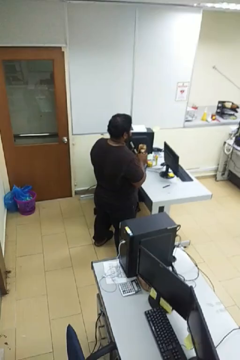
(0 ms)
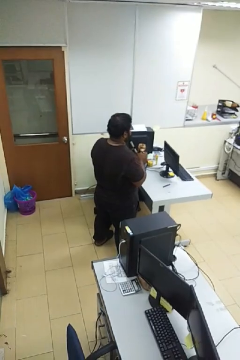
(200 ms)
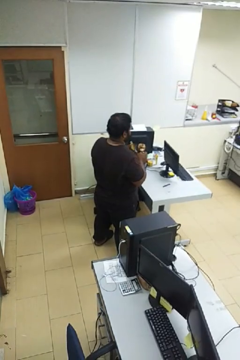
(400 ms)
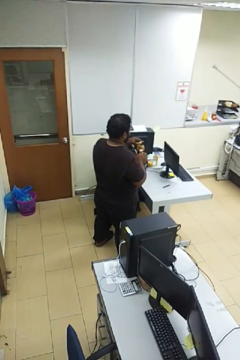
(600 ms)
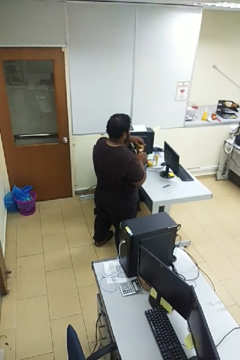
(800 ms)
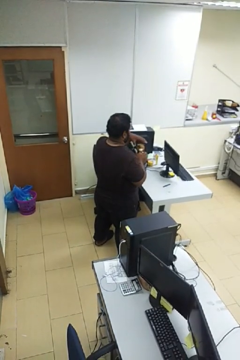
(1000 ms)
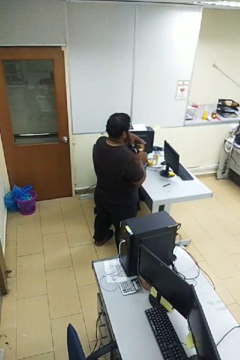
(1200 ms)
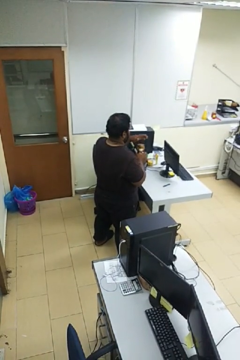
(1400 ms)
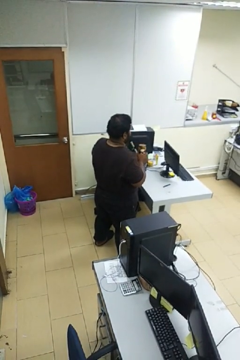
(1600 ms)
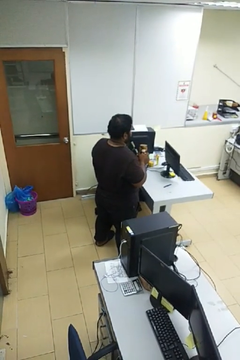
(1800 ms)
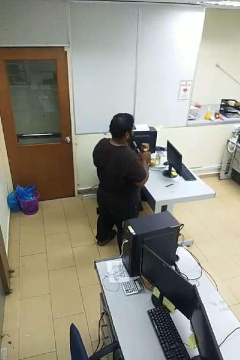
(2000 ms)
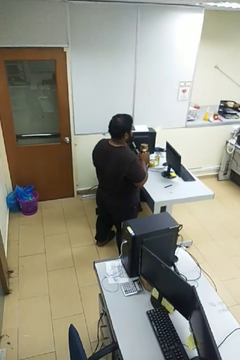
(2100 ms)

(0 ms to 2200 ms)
person closes jar

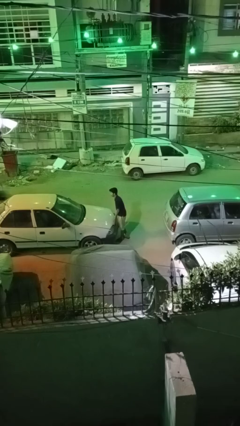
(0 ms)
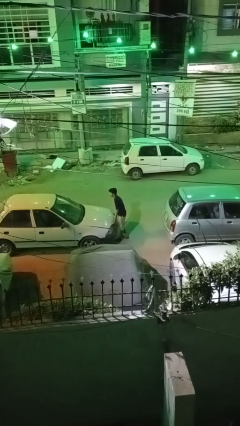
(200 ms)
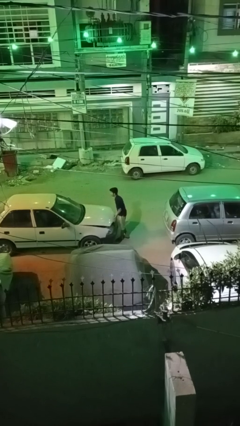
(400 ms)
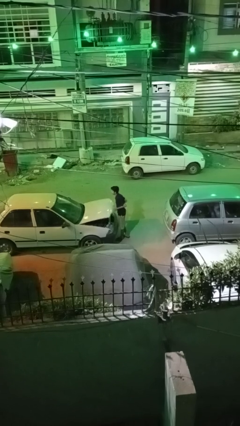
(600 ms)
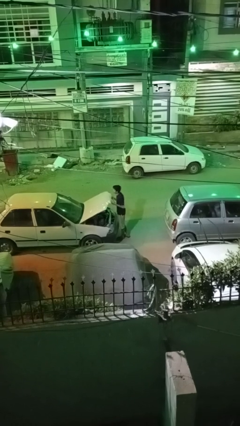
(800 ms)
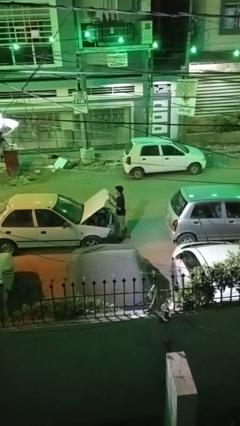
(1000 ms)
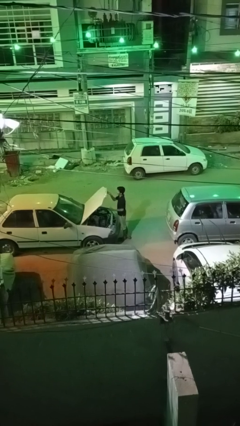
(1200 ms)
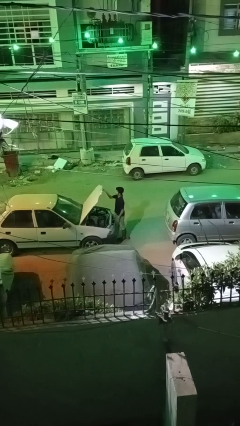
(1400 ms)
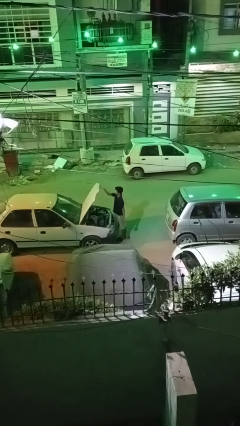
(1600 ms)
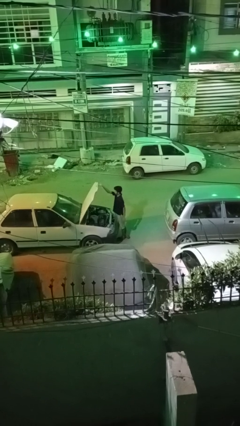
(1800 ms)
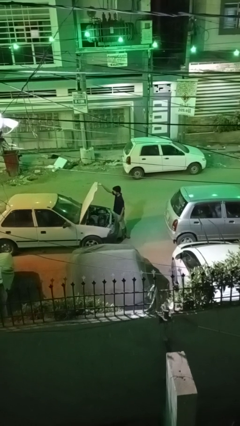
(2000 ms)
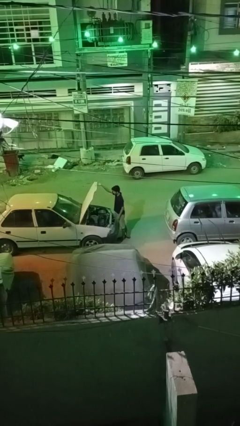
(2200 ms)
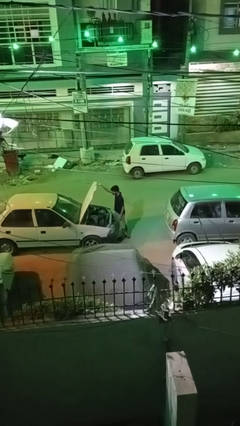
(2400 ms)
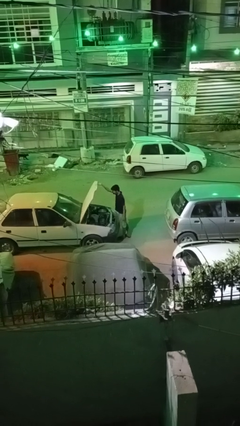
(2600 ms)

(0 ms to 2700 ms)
person opens car hood

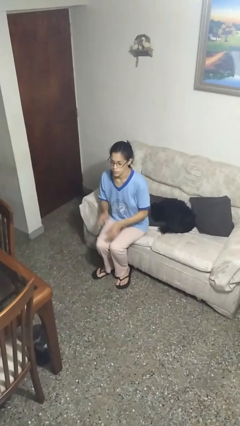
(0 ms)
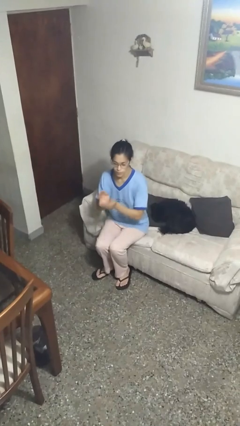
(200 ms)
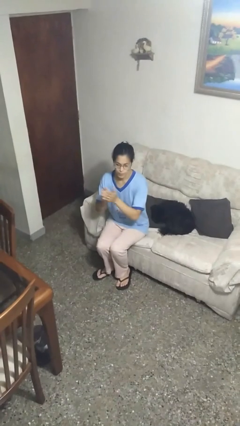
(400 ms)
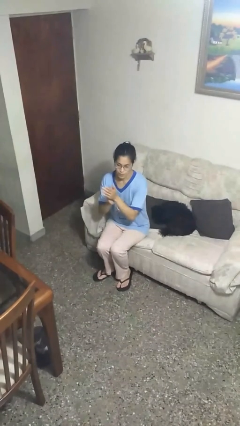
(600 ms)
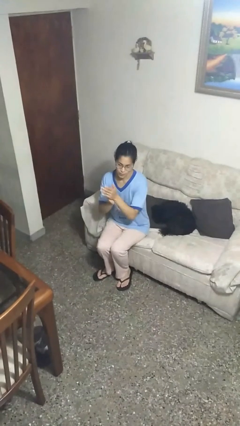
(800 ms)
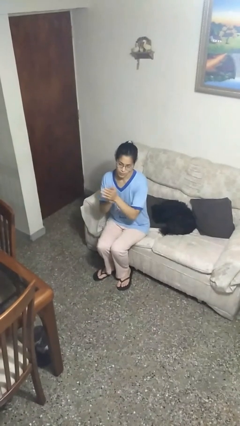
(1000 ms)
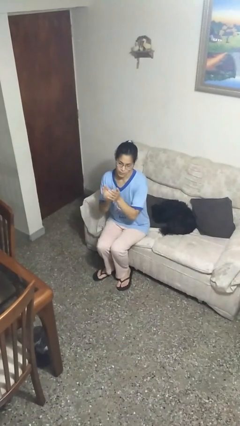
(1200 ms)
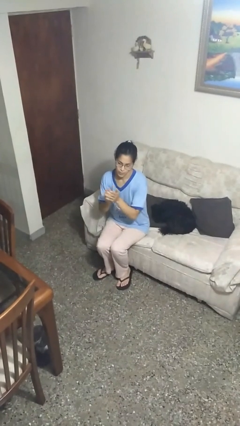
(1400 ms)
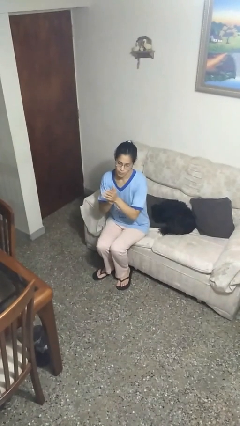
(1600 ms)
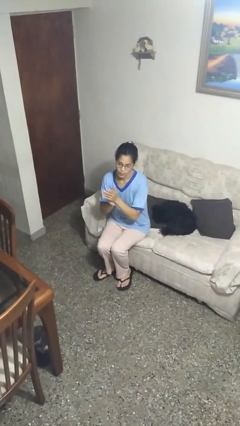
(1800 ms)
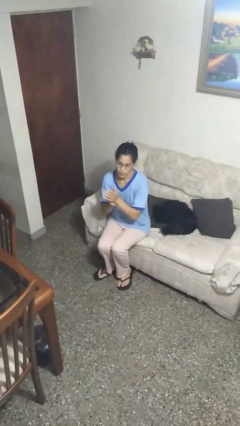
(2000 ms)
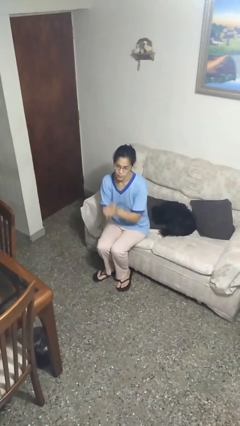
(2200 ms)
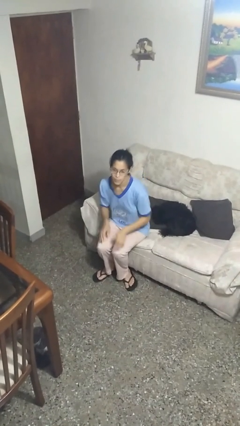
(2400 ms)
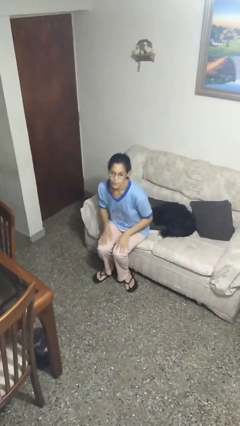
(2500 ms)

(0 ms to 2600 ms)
person claps hands

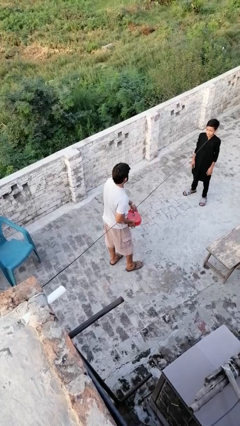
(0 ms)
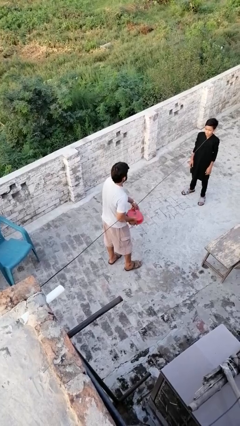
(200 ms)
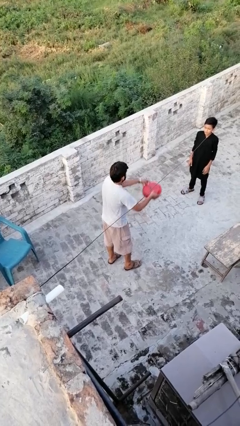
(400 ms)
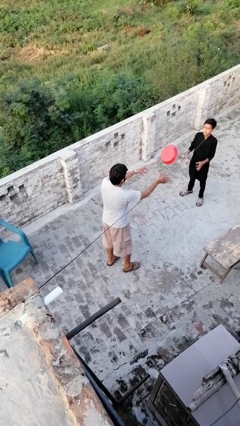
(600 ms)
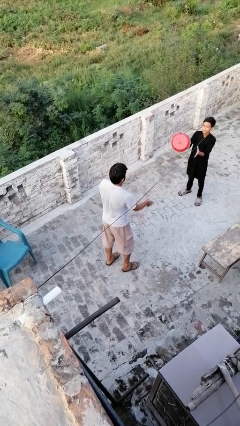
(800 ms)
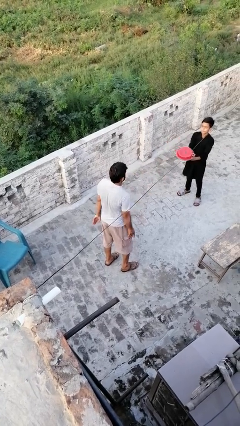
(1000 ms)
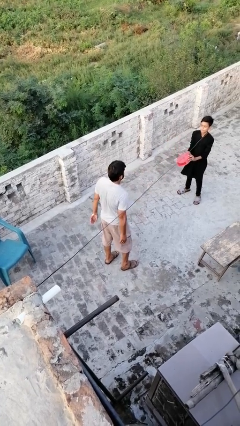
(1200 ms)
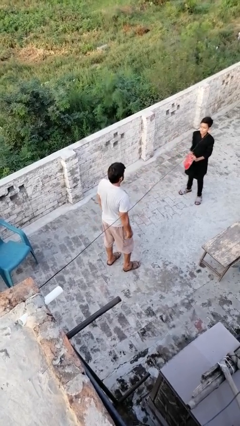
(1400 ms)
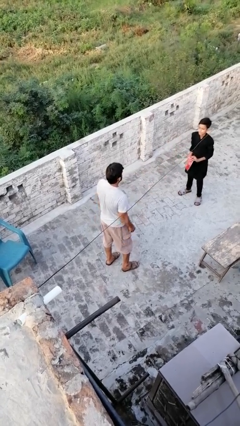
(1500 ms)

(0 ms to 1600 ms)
person throws object to person

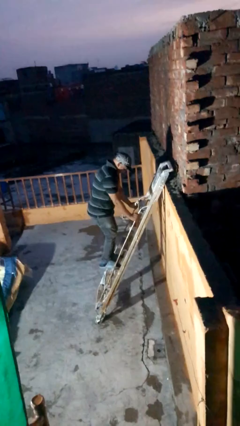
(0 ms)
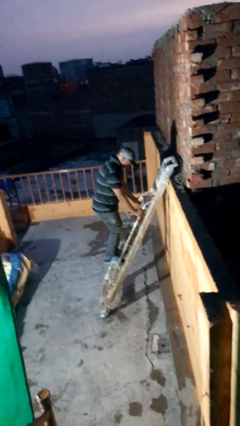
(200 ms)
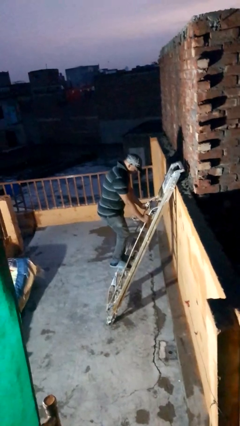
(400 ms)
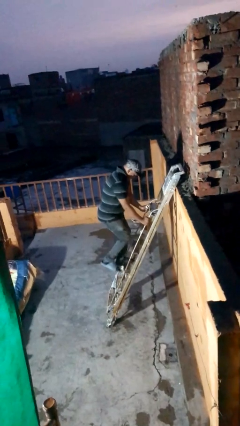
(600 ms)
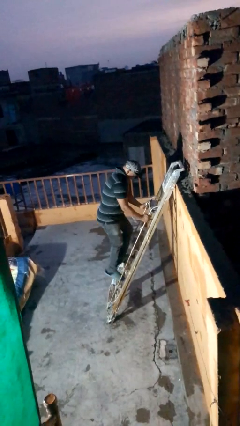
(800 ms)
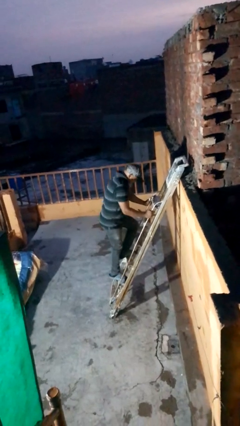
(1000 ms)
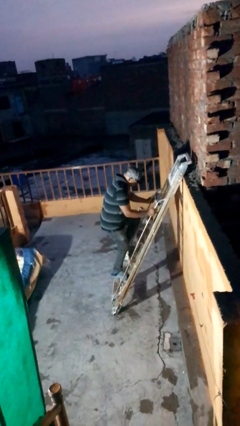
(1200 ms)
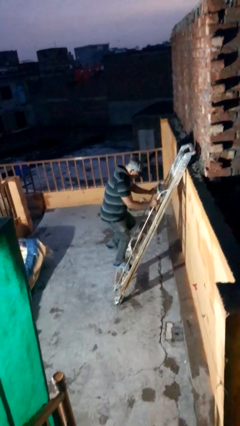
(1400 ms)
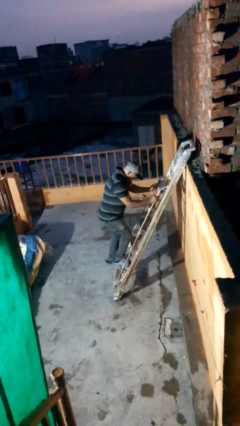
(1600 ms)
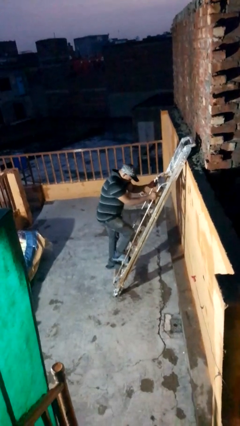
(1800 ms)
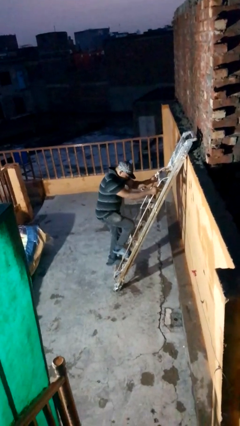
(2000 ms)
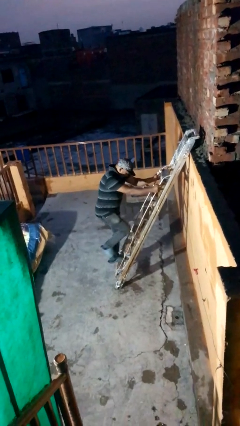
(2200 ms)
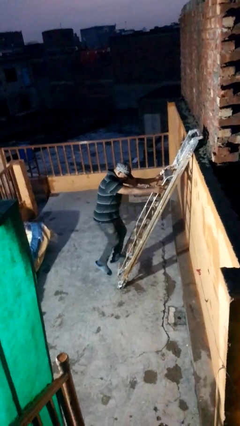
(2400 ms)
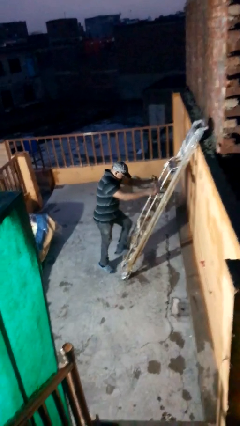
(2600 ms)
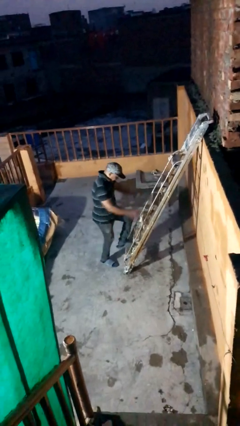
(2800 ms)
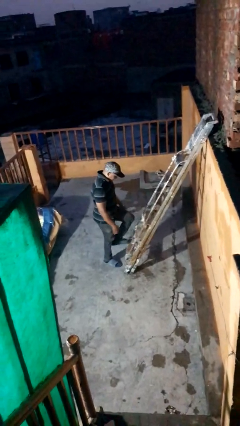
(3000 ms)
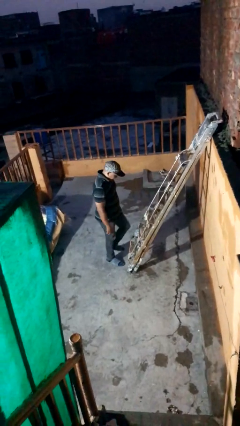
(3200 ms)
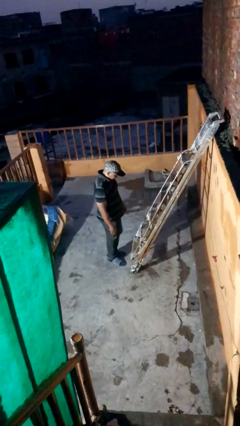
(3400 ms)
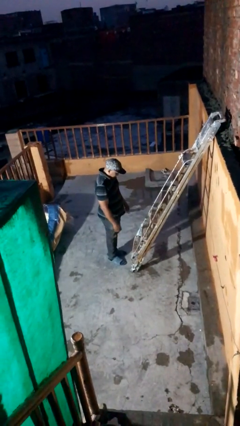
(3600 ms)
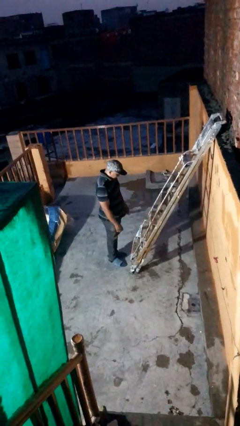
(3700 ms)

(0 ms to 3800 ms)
person climbs down ladder

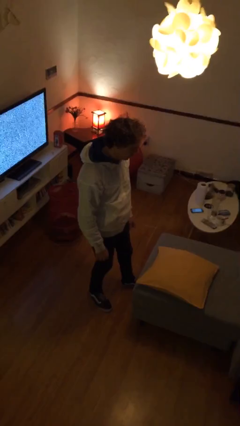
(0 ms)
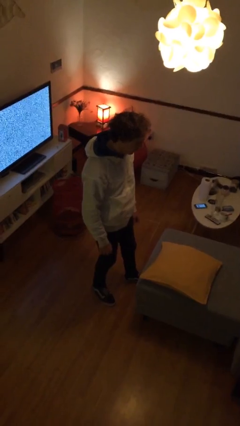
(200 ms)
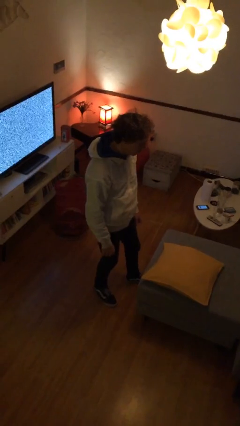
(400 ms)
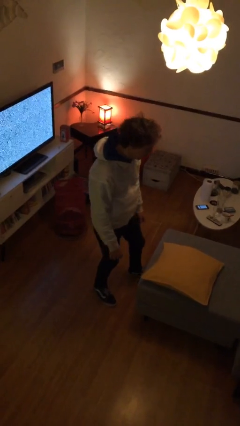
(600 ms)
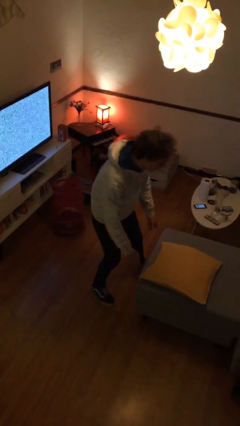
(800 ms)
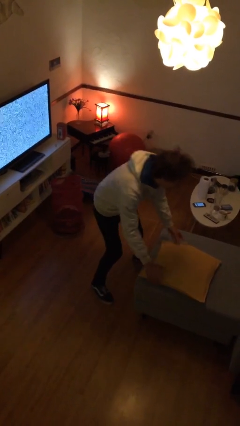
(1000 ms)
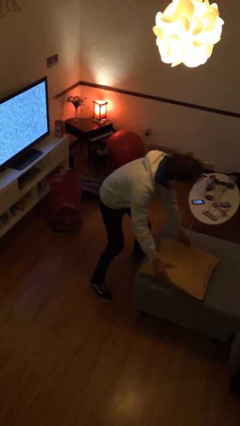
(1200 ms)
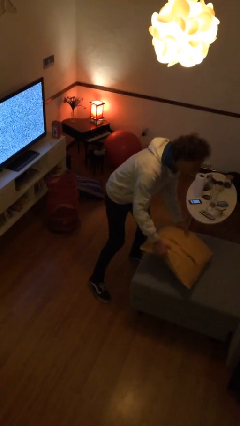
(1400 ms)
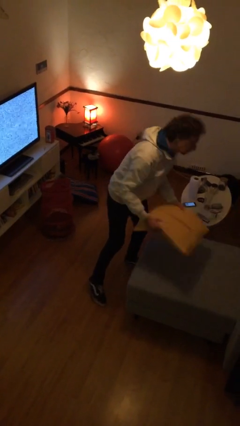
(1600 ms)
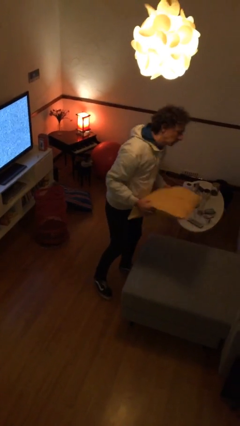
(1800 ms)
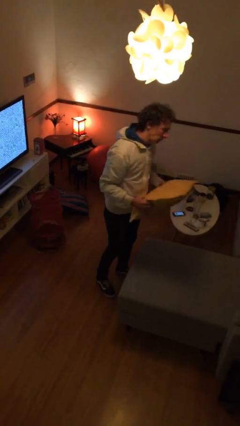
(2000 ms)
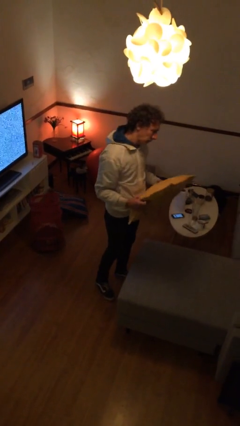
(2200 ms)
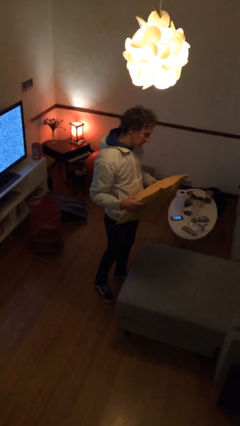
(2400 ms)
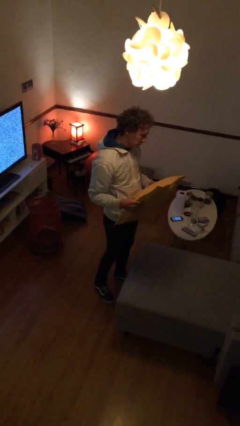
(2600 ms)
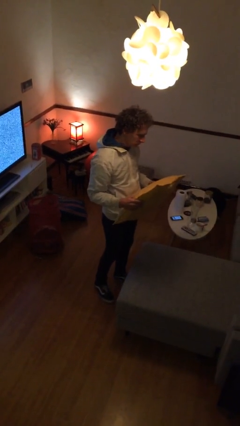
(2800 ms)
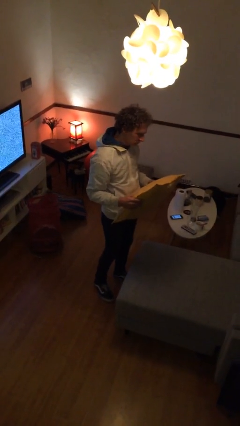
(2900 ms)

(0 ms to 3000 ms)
person picks up object from couch

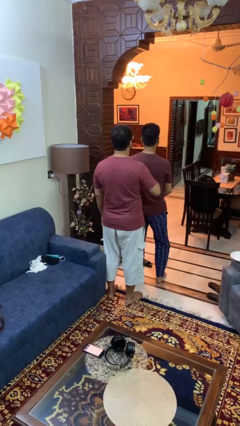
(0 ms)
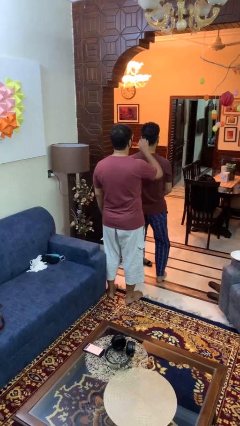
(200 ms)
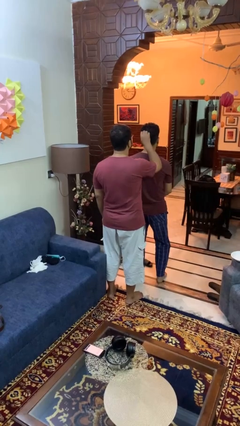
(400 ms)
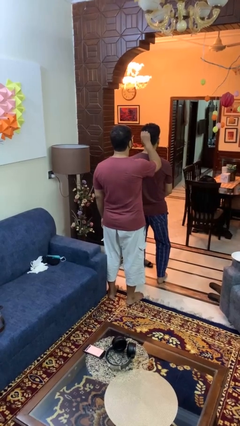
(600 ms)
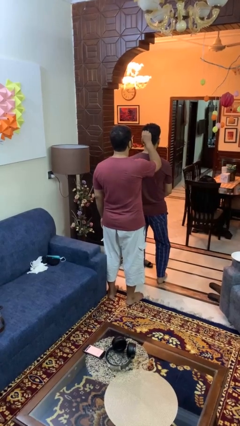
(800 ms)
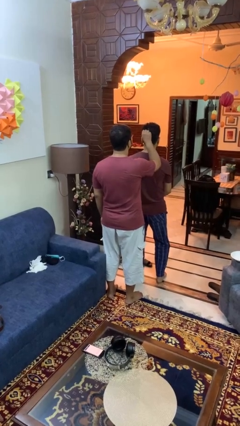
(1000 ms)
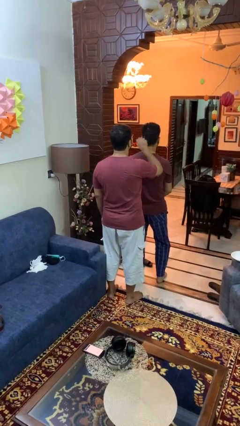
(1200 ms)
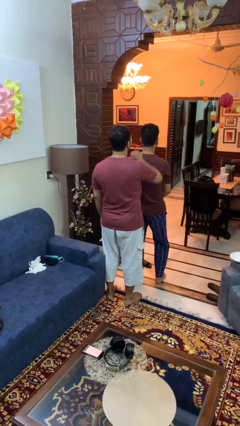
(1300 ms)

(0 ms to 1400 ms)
person grabs person by hair

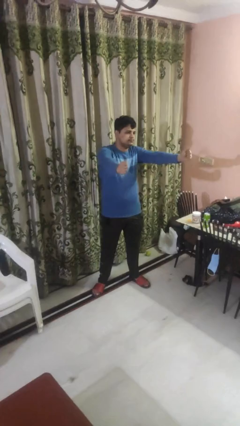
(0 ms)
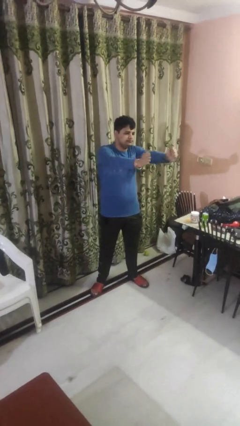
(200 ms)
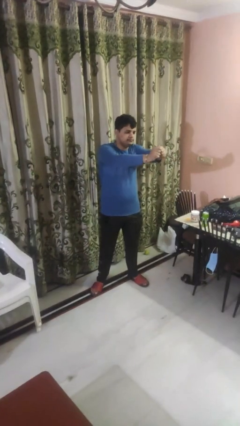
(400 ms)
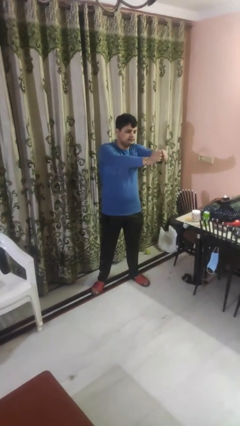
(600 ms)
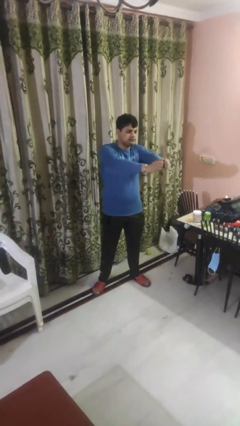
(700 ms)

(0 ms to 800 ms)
person gestures zoom out
